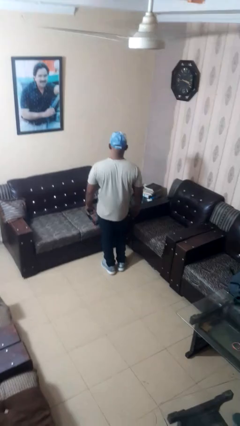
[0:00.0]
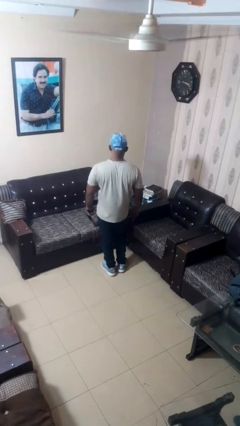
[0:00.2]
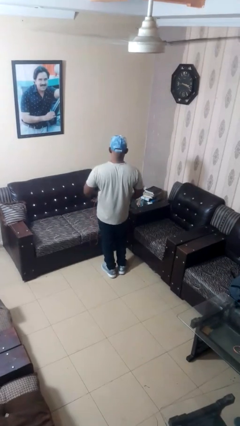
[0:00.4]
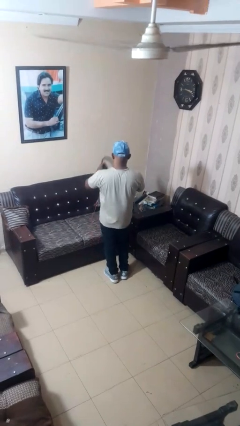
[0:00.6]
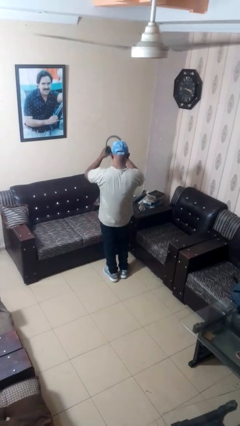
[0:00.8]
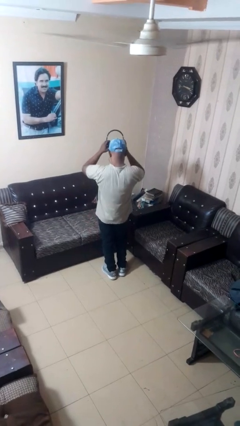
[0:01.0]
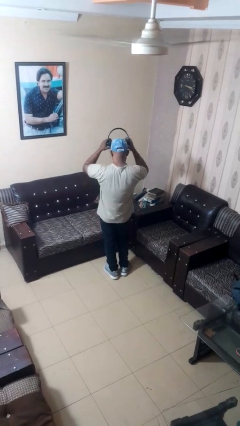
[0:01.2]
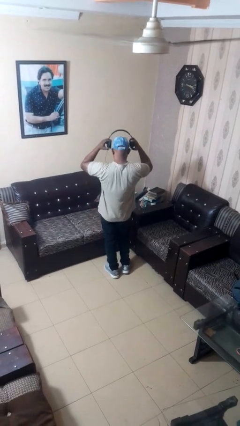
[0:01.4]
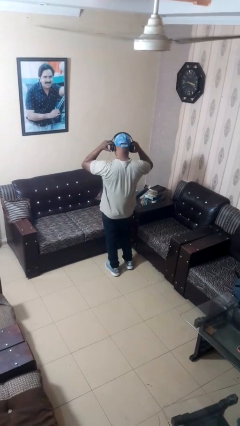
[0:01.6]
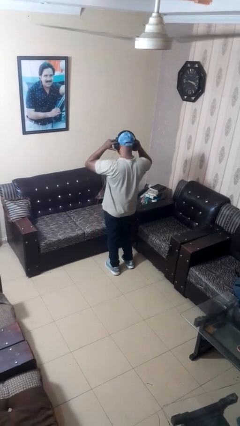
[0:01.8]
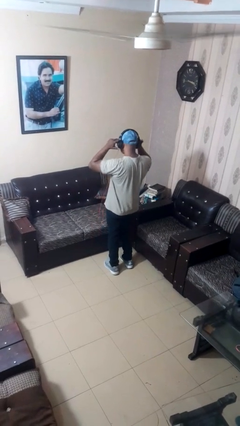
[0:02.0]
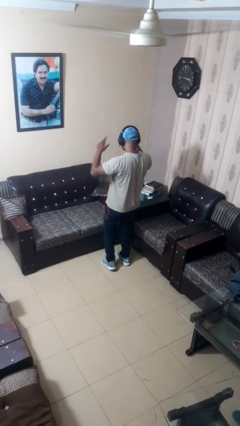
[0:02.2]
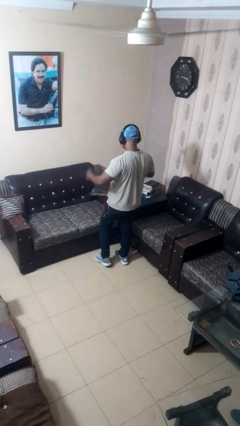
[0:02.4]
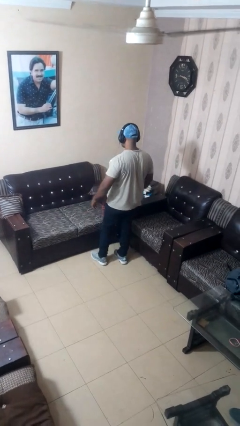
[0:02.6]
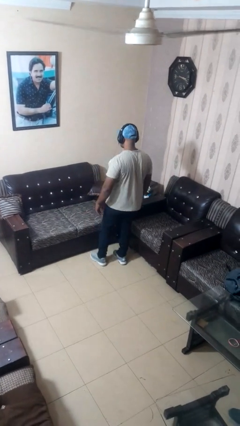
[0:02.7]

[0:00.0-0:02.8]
person puts on headphones

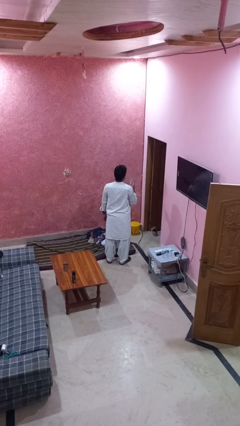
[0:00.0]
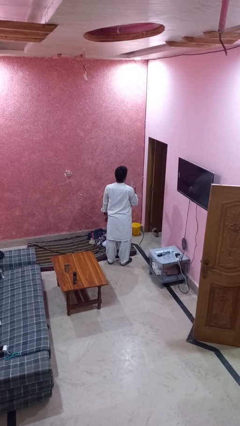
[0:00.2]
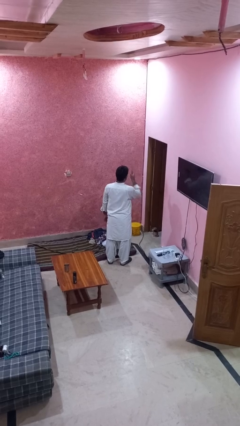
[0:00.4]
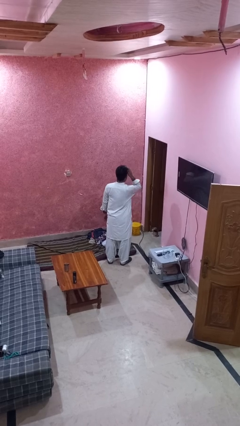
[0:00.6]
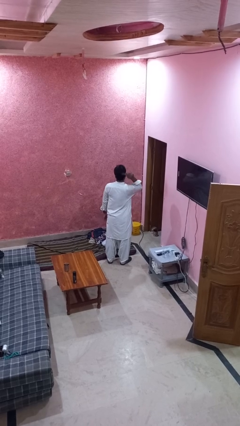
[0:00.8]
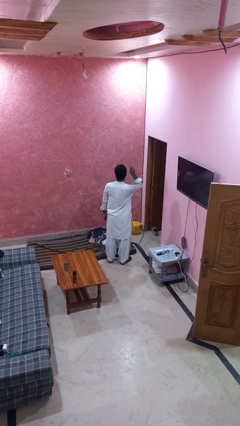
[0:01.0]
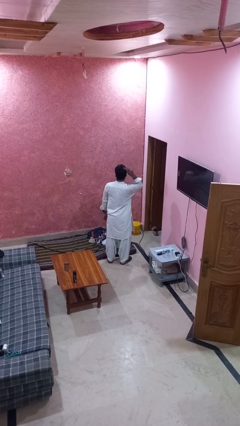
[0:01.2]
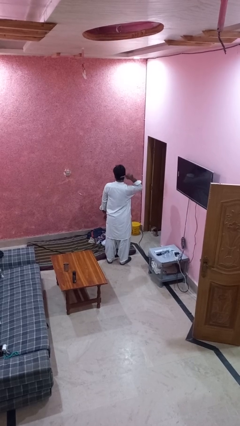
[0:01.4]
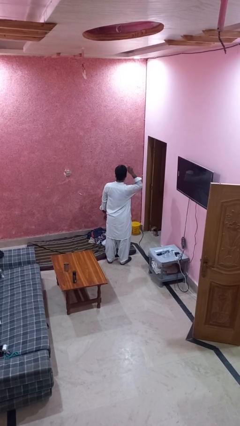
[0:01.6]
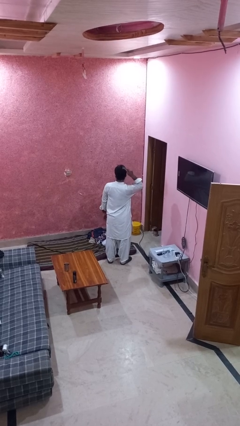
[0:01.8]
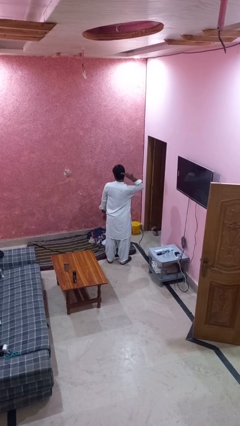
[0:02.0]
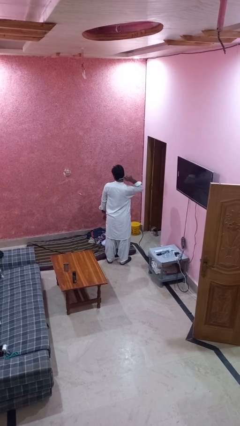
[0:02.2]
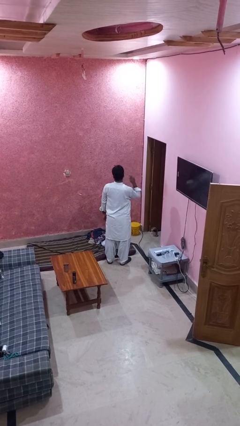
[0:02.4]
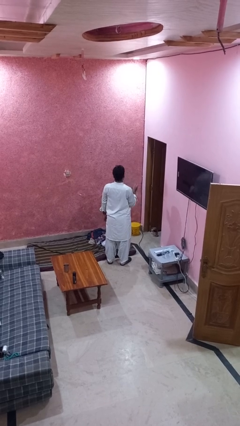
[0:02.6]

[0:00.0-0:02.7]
person brushes hair

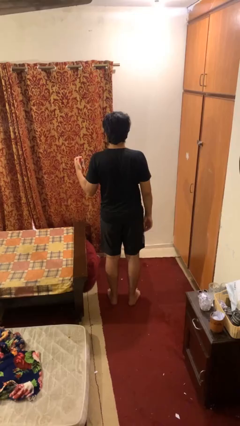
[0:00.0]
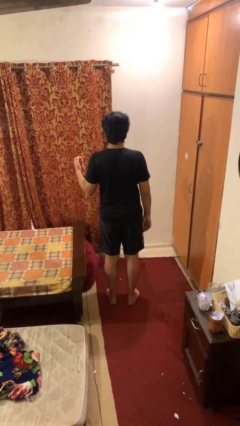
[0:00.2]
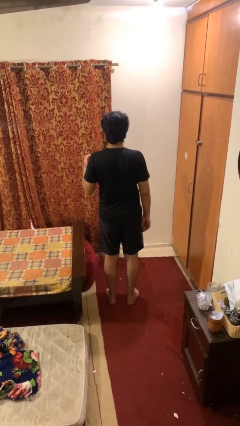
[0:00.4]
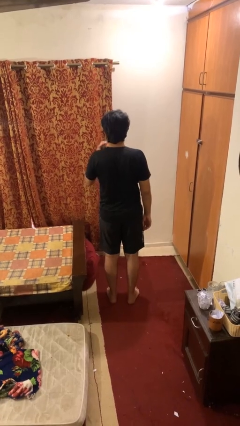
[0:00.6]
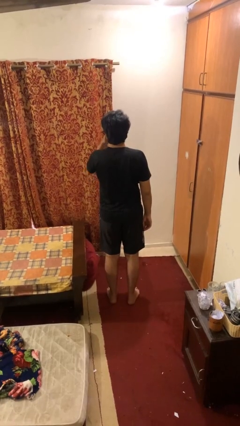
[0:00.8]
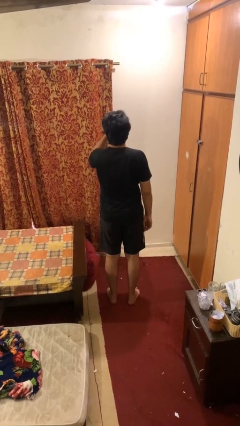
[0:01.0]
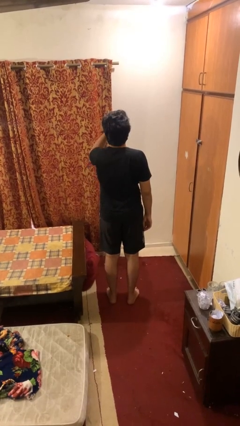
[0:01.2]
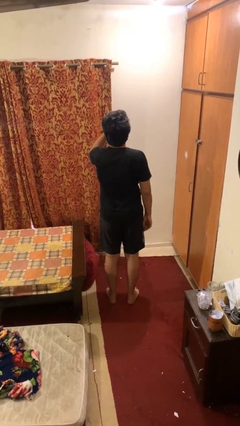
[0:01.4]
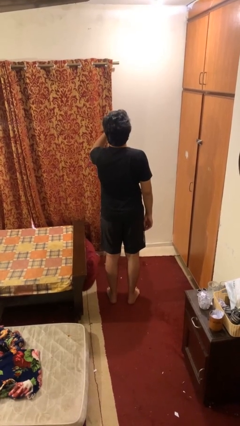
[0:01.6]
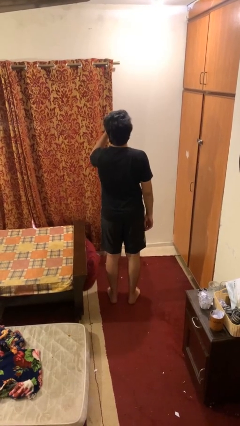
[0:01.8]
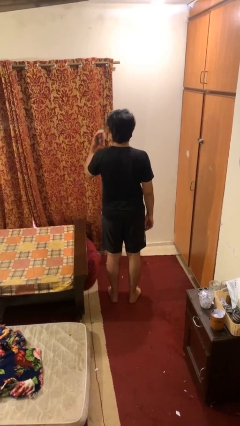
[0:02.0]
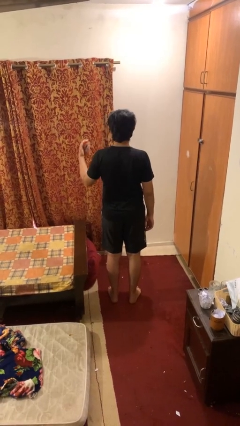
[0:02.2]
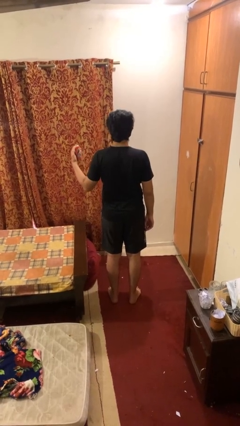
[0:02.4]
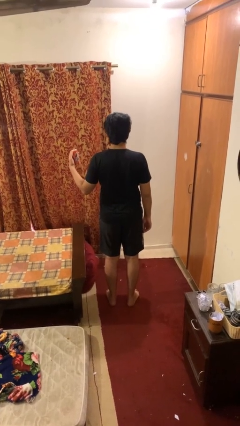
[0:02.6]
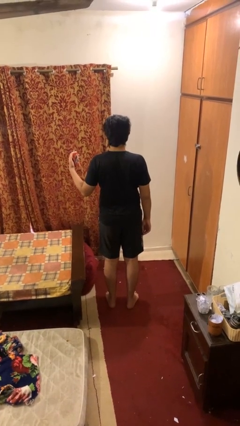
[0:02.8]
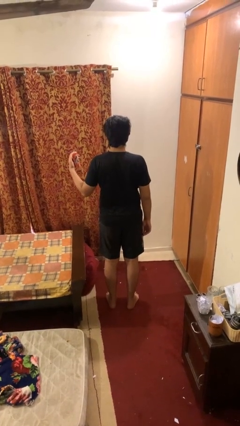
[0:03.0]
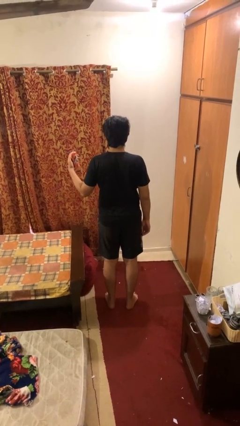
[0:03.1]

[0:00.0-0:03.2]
person drinks from beverage can

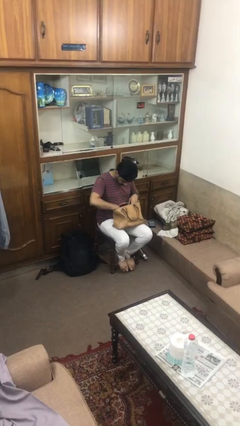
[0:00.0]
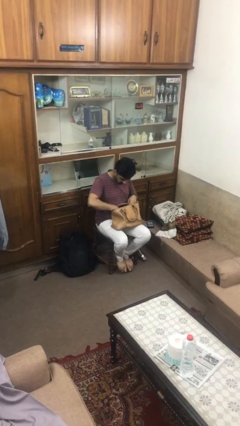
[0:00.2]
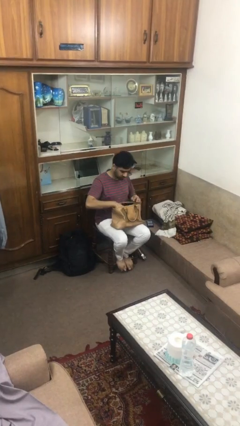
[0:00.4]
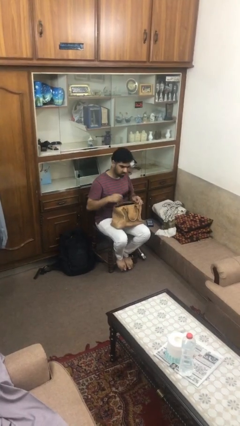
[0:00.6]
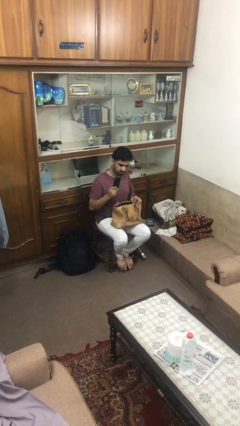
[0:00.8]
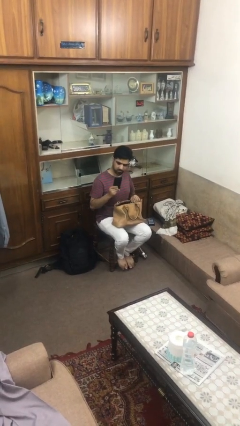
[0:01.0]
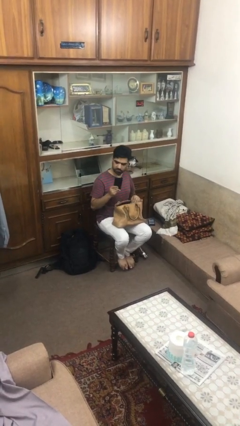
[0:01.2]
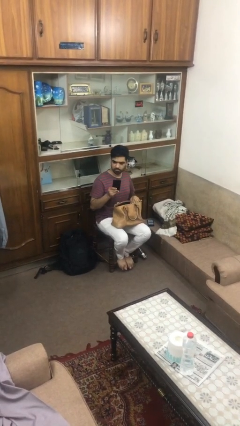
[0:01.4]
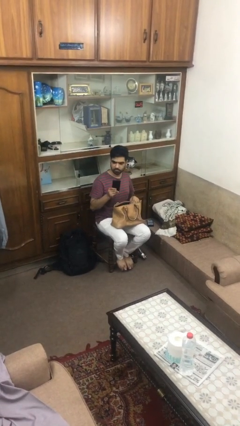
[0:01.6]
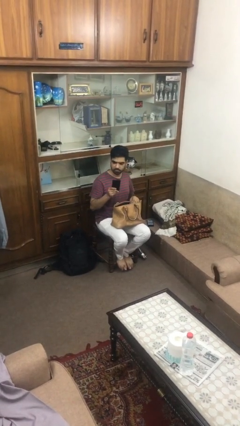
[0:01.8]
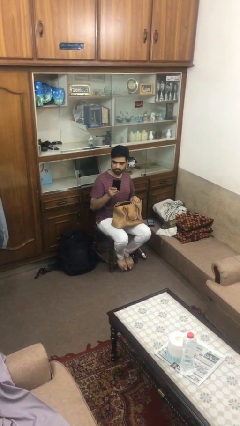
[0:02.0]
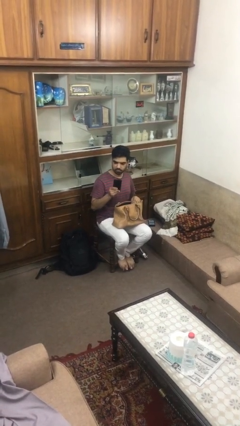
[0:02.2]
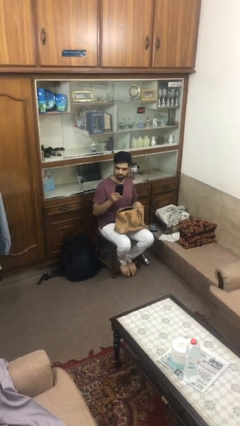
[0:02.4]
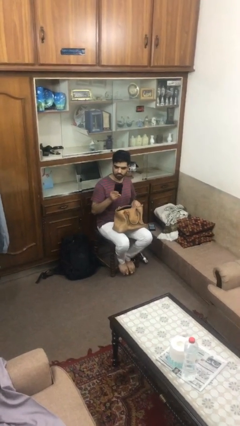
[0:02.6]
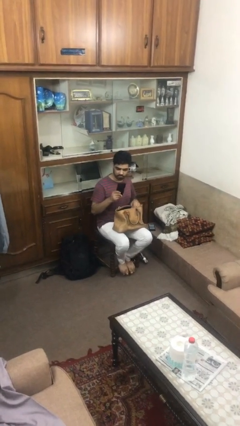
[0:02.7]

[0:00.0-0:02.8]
person takes object from purse

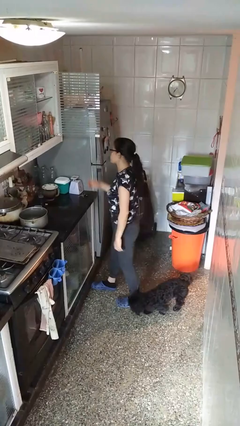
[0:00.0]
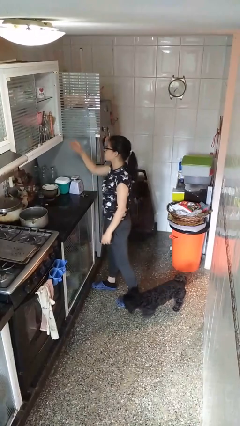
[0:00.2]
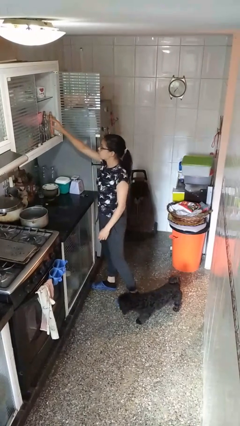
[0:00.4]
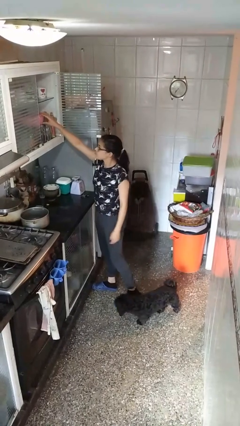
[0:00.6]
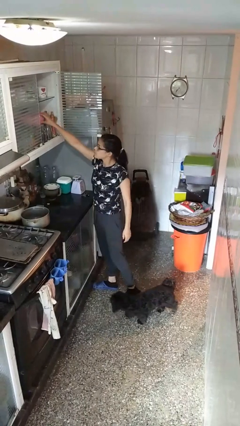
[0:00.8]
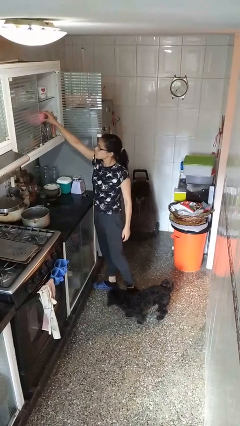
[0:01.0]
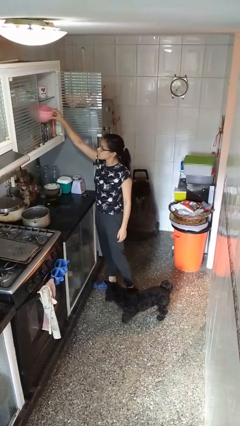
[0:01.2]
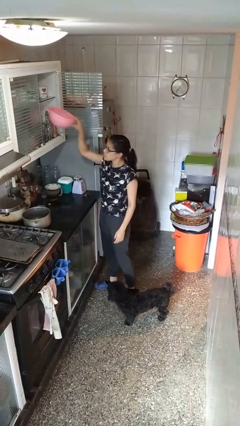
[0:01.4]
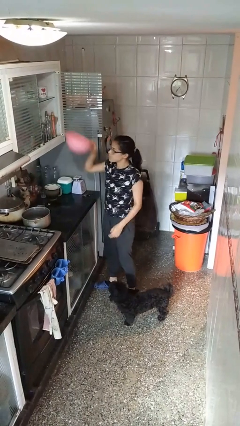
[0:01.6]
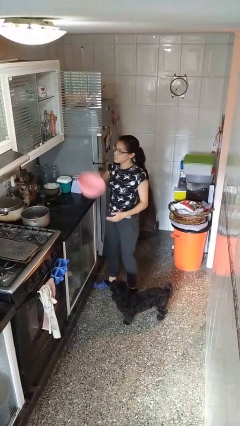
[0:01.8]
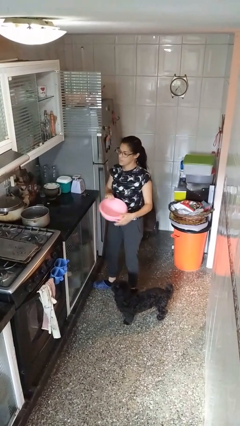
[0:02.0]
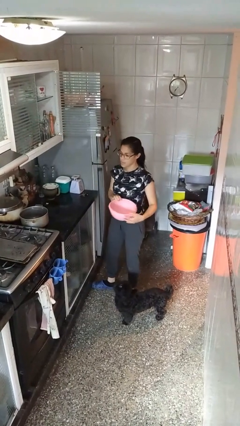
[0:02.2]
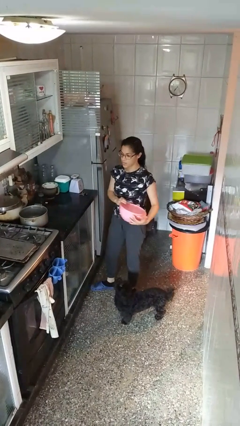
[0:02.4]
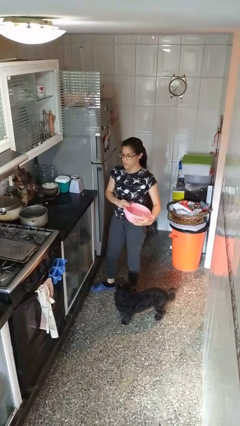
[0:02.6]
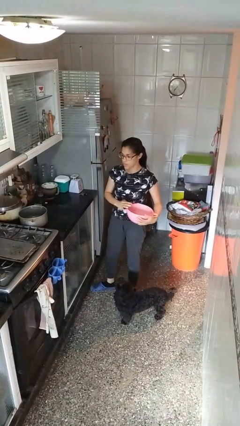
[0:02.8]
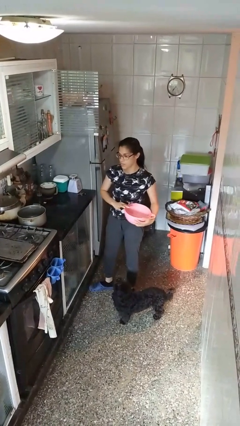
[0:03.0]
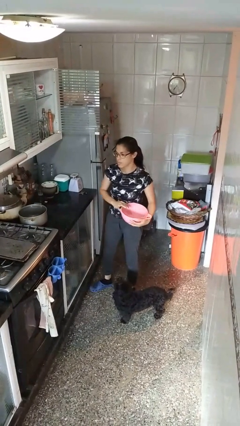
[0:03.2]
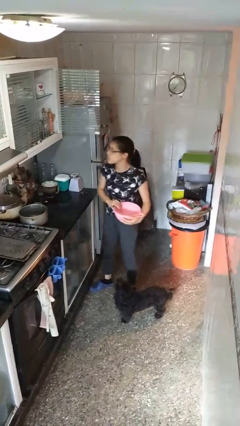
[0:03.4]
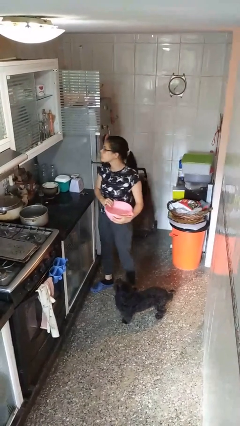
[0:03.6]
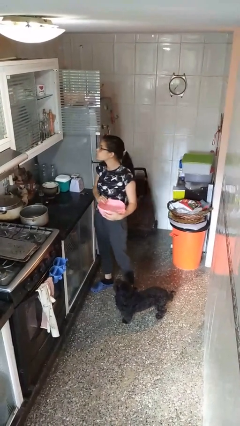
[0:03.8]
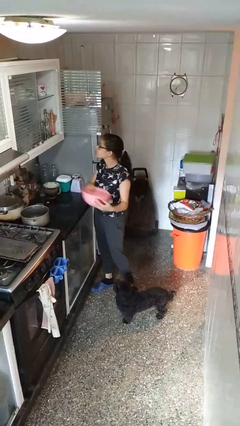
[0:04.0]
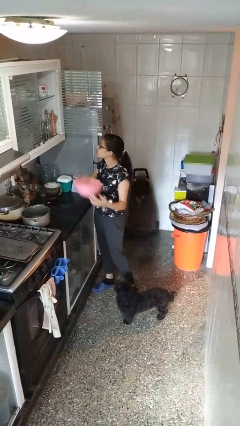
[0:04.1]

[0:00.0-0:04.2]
person picks up object from cabinet

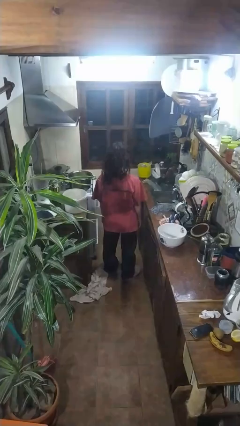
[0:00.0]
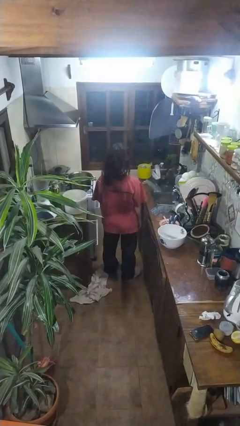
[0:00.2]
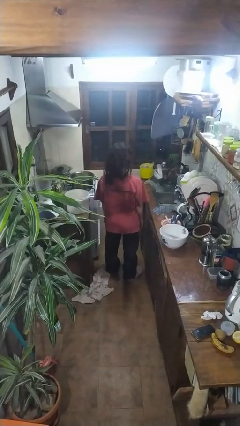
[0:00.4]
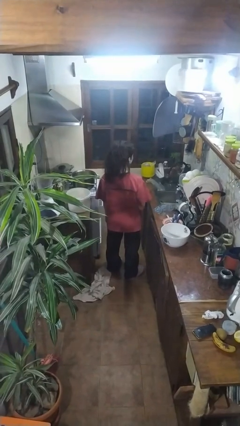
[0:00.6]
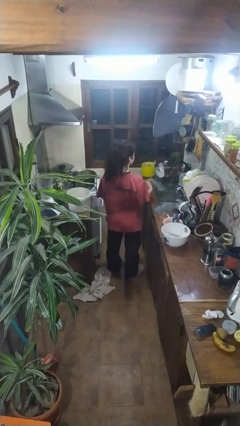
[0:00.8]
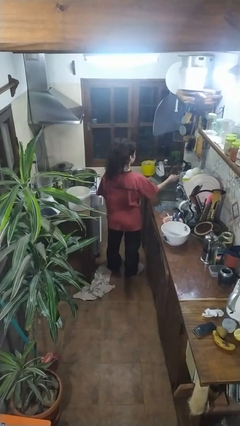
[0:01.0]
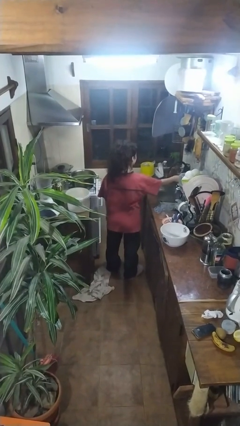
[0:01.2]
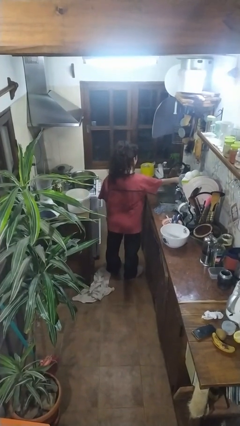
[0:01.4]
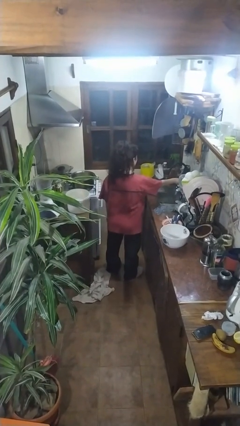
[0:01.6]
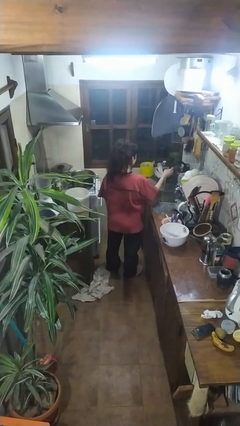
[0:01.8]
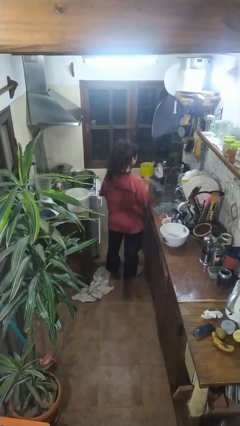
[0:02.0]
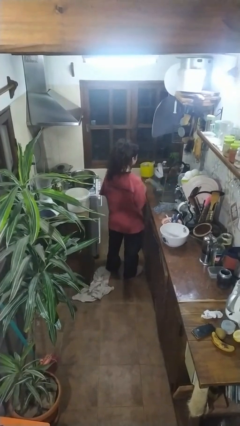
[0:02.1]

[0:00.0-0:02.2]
person turns on faucet
